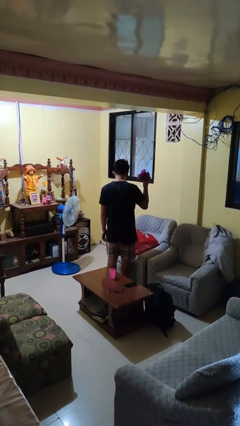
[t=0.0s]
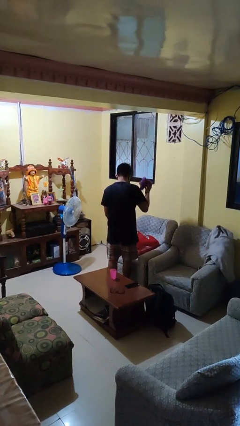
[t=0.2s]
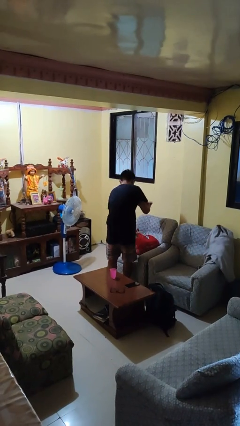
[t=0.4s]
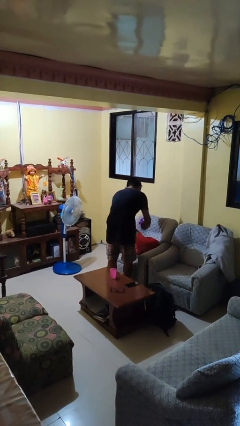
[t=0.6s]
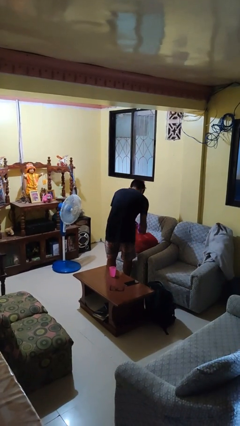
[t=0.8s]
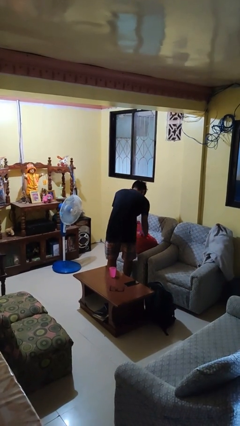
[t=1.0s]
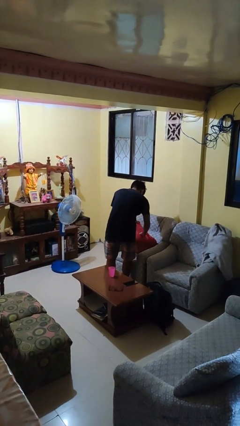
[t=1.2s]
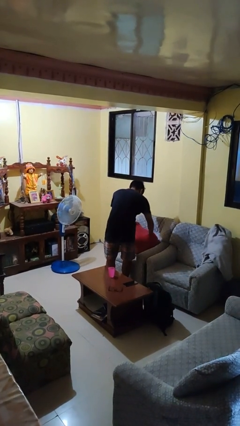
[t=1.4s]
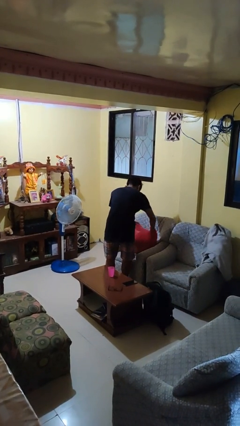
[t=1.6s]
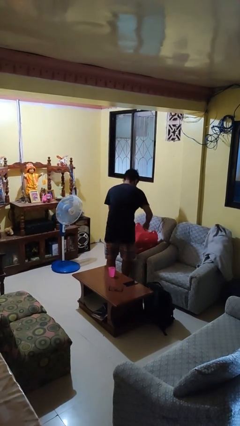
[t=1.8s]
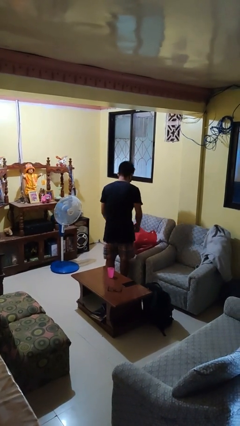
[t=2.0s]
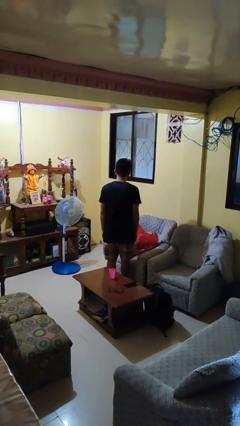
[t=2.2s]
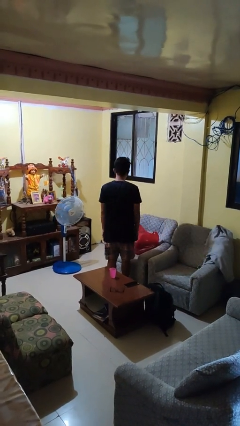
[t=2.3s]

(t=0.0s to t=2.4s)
person puts object into bag

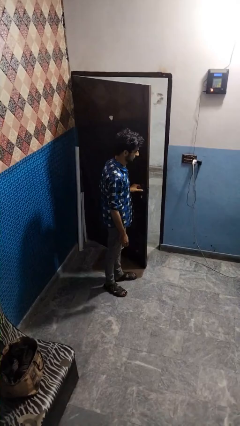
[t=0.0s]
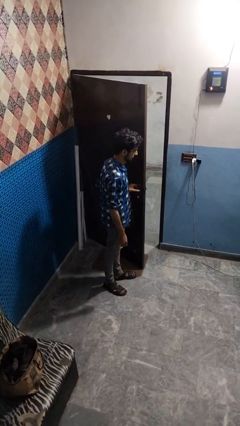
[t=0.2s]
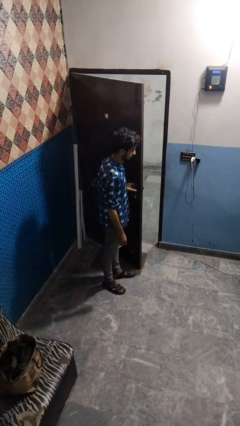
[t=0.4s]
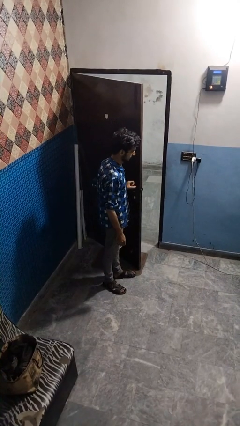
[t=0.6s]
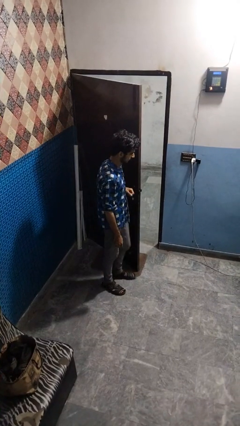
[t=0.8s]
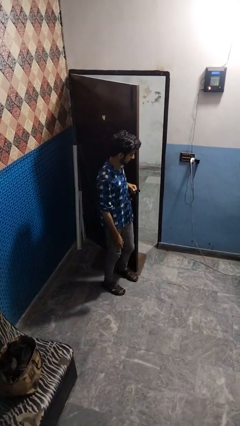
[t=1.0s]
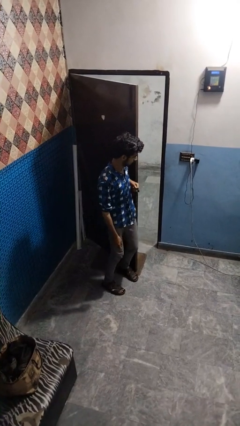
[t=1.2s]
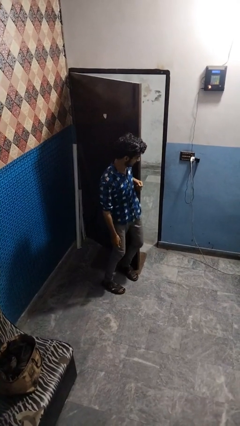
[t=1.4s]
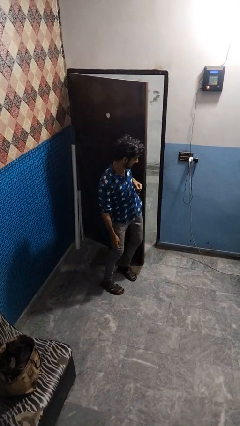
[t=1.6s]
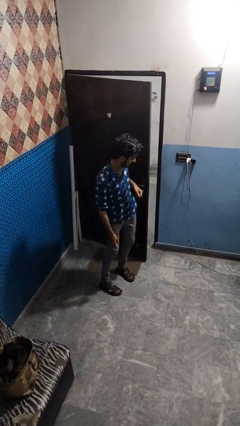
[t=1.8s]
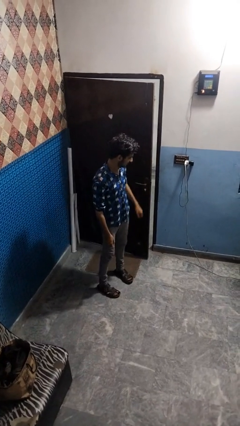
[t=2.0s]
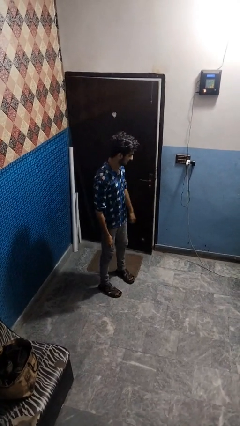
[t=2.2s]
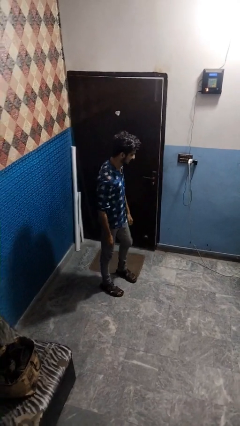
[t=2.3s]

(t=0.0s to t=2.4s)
person closes door with hip

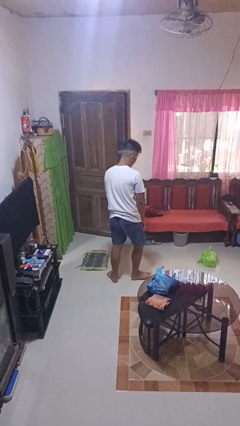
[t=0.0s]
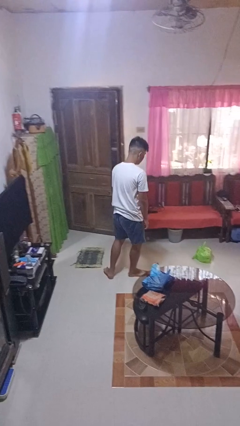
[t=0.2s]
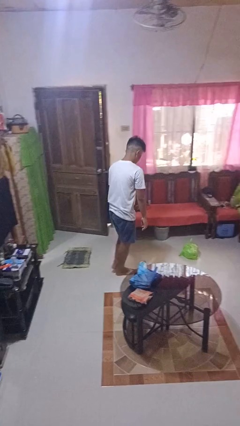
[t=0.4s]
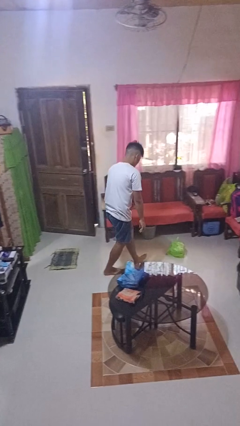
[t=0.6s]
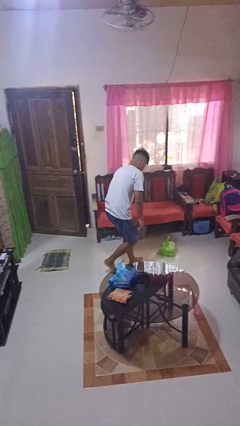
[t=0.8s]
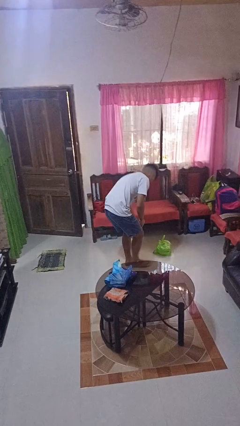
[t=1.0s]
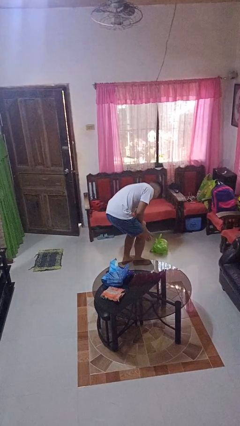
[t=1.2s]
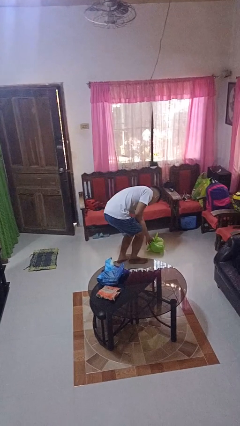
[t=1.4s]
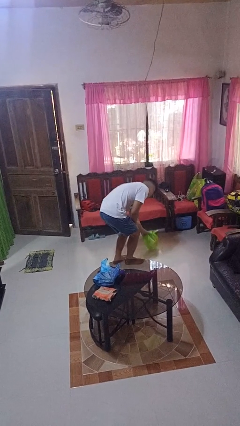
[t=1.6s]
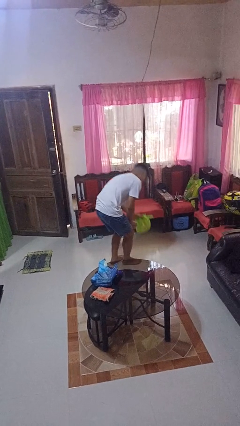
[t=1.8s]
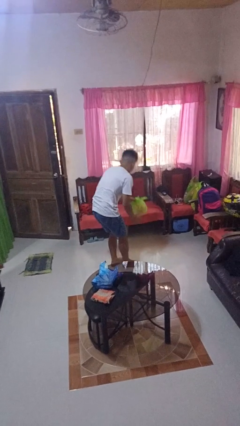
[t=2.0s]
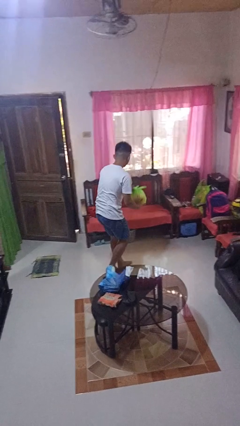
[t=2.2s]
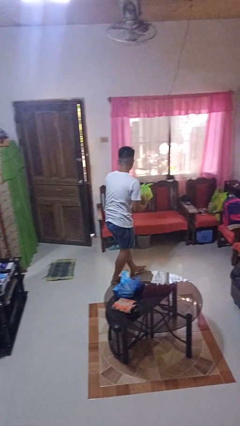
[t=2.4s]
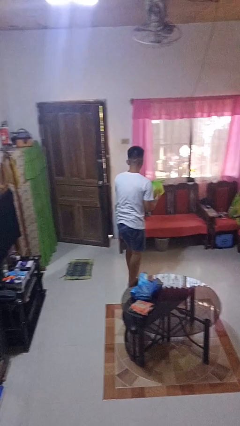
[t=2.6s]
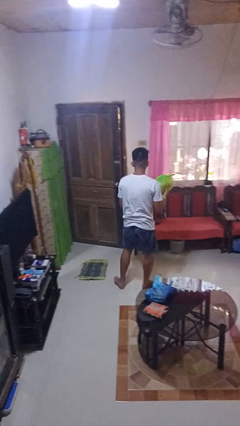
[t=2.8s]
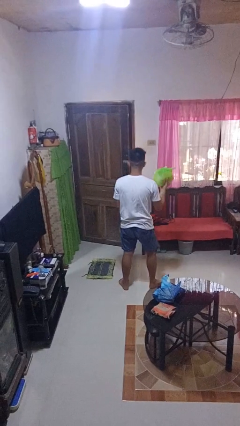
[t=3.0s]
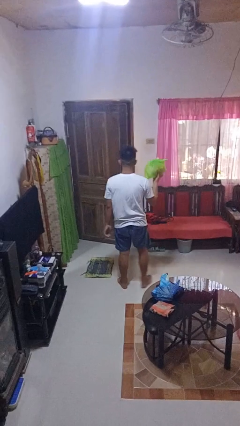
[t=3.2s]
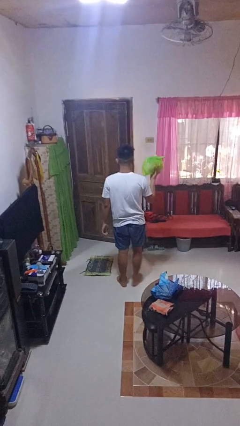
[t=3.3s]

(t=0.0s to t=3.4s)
person picks up object from floor

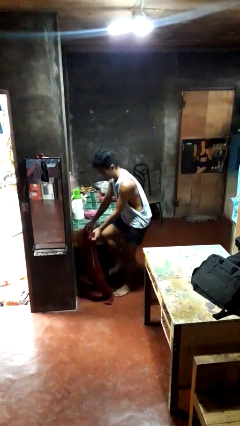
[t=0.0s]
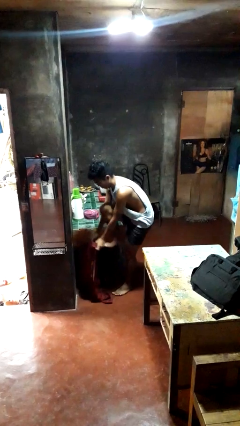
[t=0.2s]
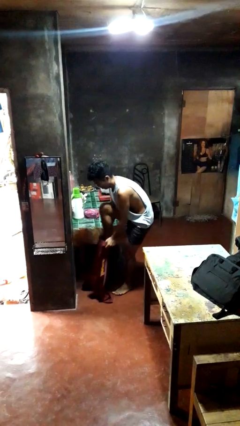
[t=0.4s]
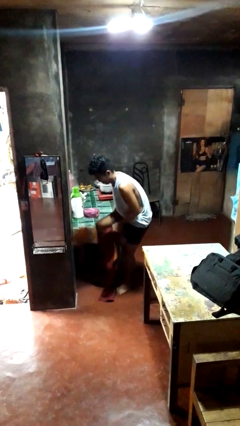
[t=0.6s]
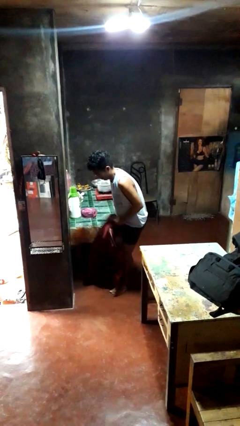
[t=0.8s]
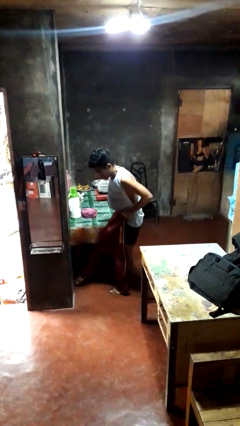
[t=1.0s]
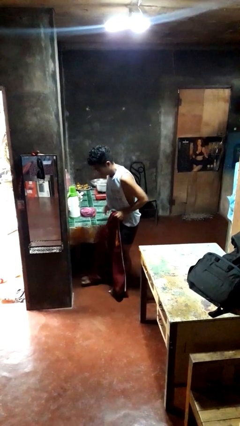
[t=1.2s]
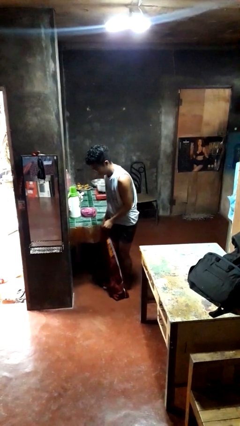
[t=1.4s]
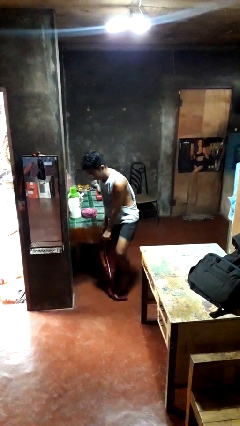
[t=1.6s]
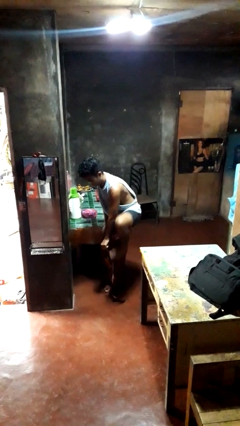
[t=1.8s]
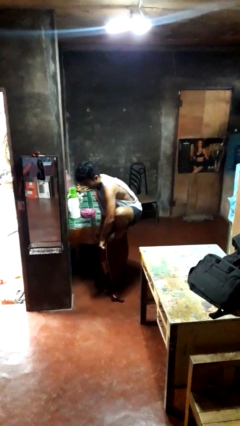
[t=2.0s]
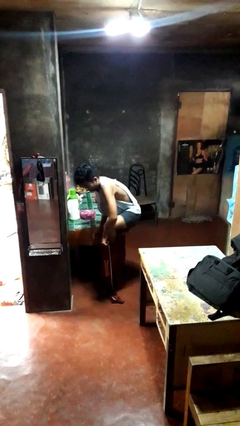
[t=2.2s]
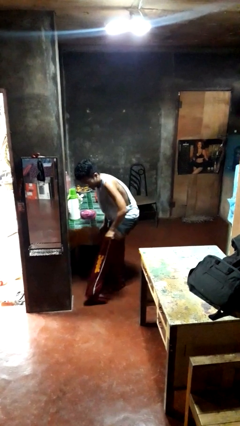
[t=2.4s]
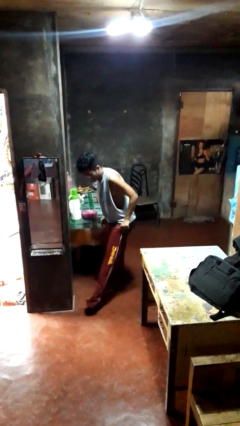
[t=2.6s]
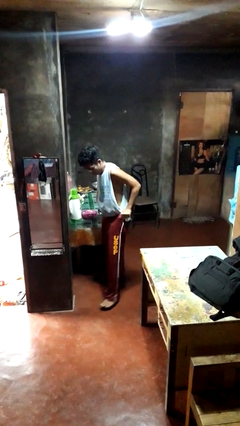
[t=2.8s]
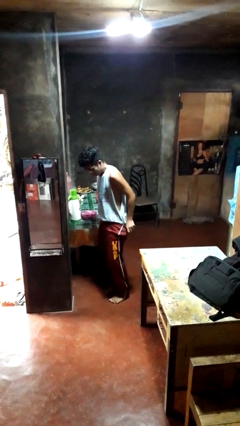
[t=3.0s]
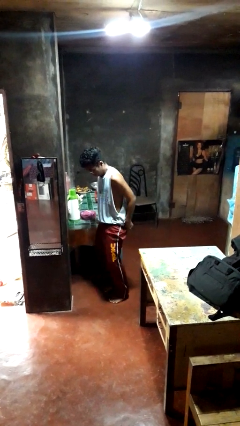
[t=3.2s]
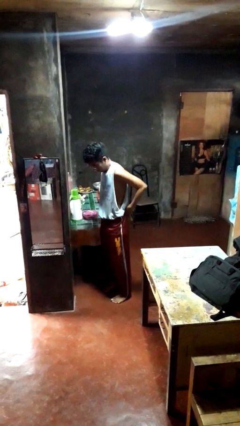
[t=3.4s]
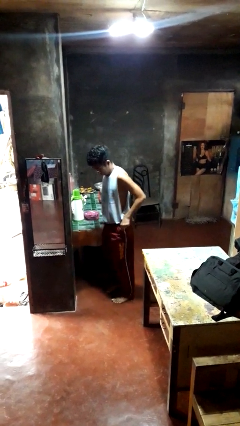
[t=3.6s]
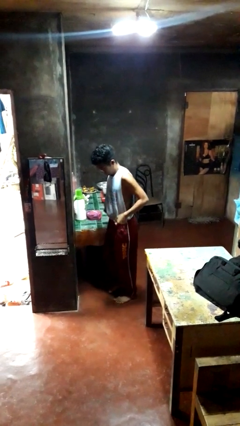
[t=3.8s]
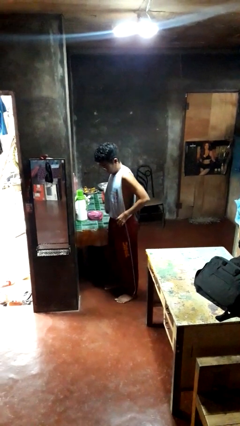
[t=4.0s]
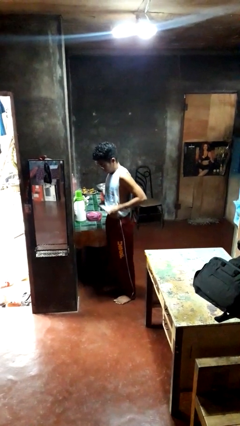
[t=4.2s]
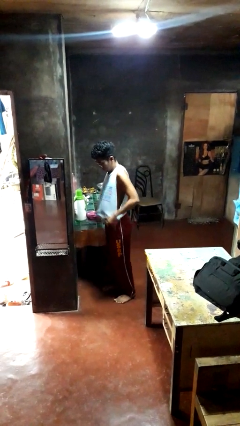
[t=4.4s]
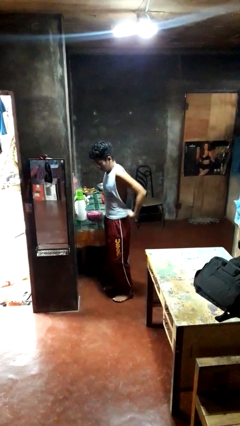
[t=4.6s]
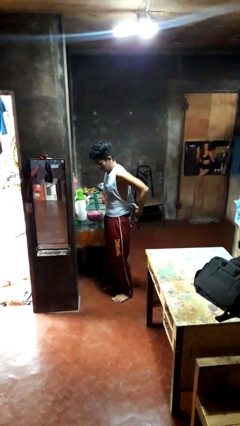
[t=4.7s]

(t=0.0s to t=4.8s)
person puts on pants

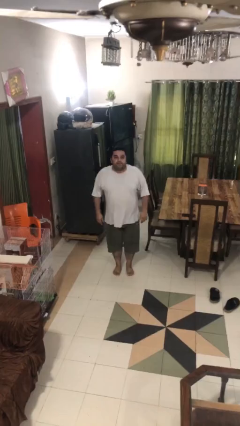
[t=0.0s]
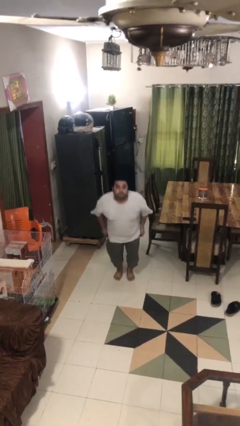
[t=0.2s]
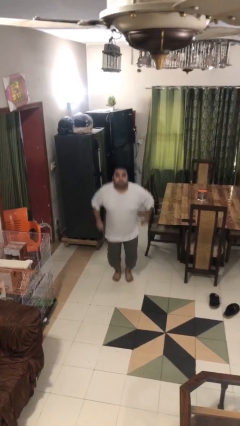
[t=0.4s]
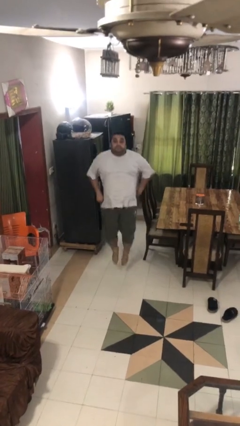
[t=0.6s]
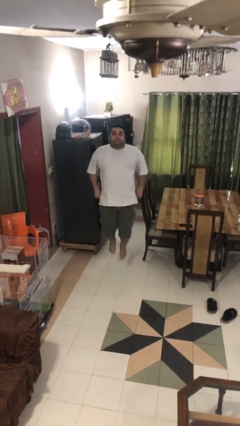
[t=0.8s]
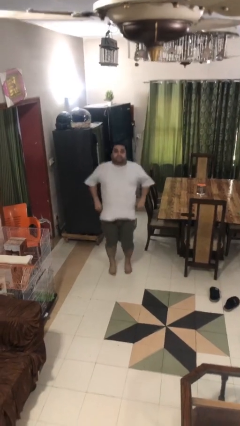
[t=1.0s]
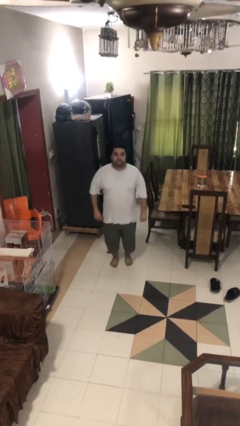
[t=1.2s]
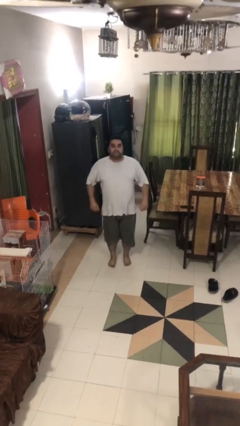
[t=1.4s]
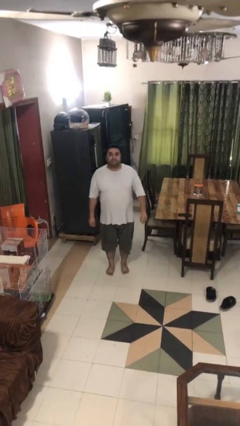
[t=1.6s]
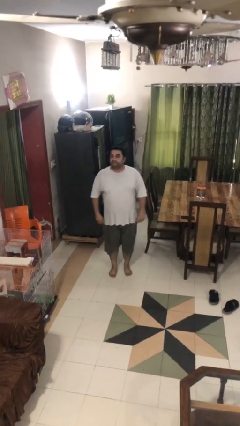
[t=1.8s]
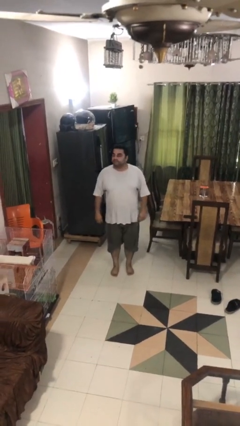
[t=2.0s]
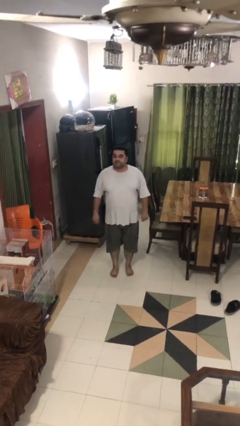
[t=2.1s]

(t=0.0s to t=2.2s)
person jumps

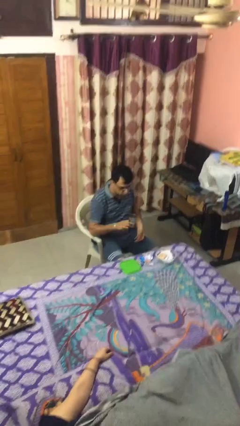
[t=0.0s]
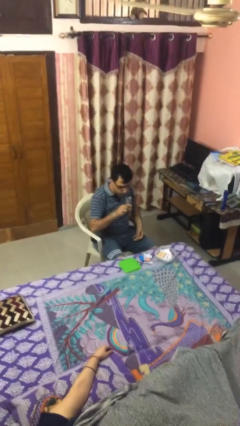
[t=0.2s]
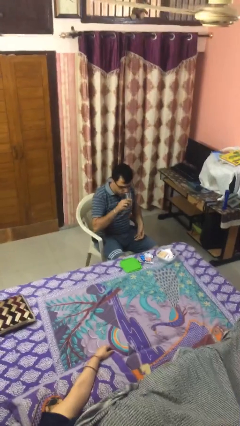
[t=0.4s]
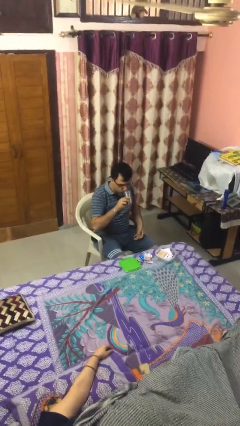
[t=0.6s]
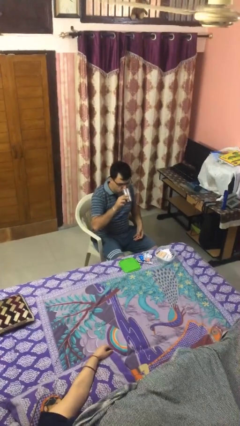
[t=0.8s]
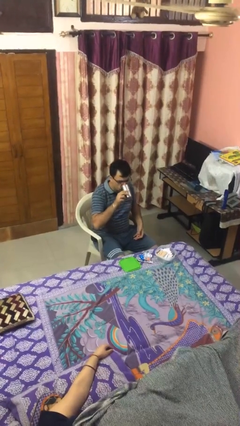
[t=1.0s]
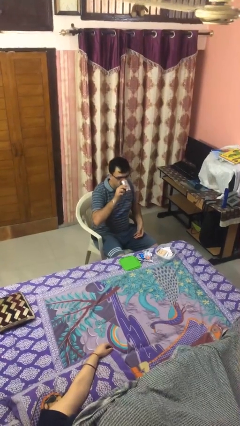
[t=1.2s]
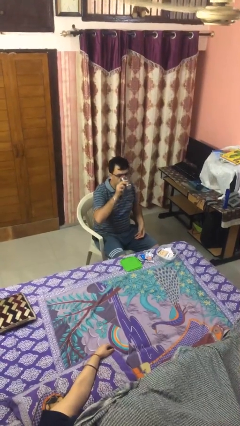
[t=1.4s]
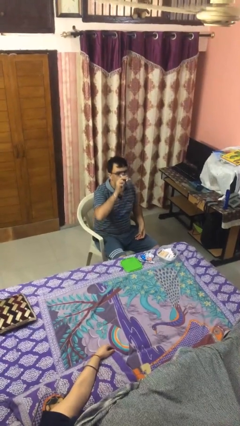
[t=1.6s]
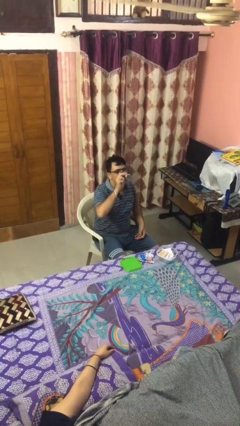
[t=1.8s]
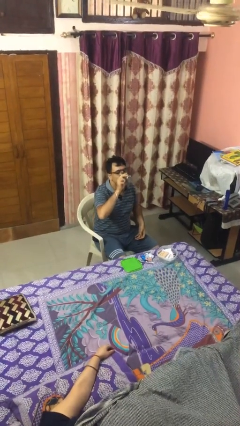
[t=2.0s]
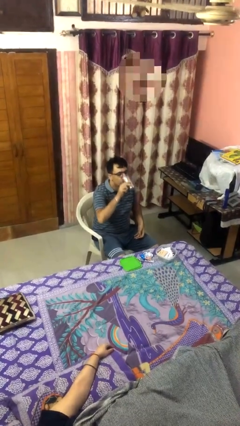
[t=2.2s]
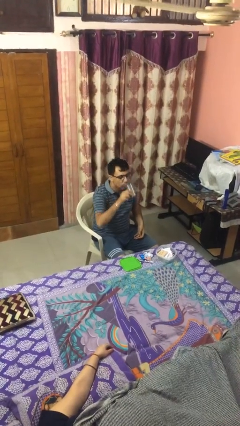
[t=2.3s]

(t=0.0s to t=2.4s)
person drinks from cup
